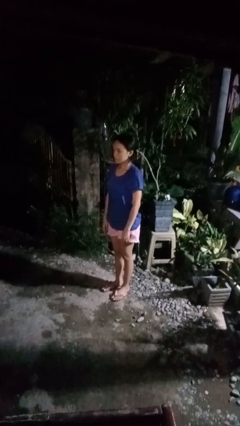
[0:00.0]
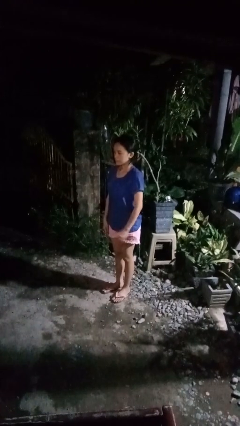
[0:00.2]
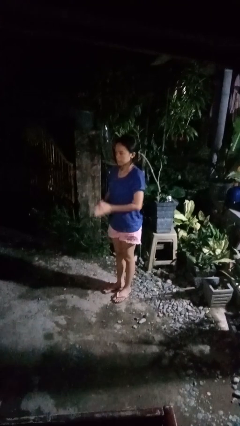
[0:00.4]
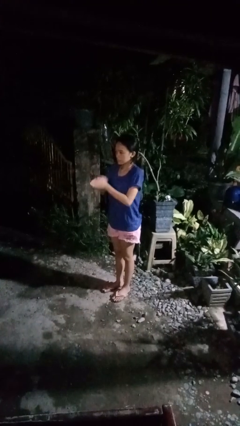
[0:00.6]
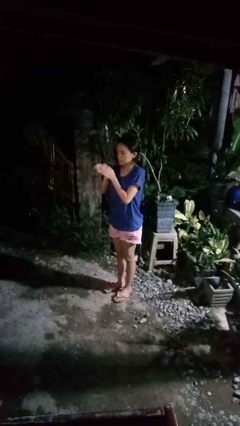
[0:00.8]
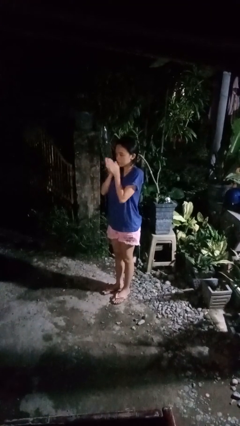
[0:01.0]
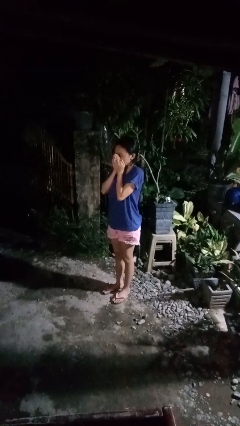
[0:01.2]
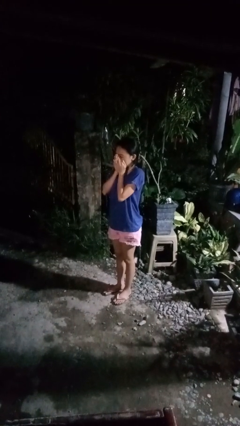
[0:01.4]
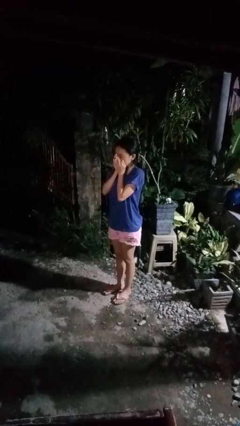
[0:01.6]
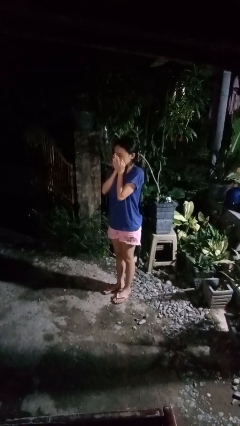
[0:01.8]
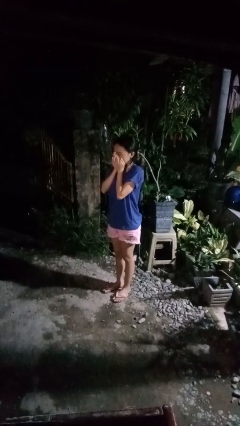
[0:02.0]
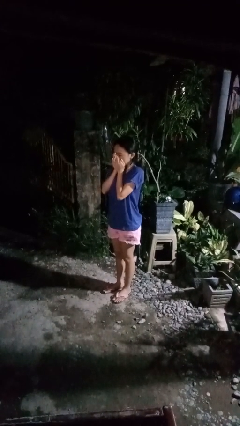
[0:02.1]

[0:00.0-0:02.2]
person blows into hands

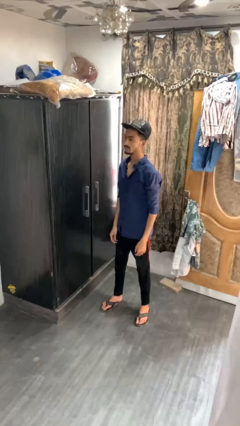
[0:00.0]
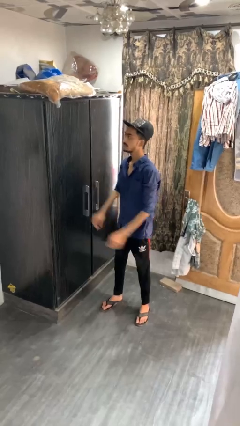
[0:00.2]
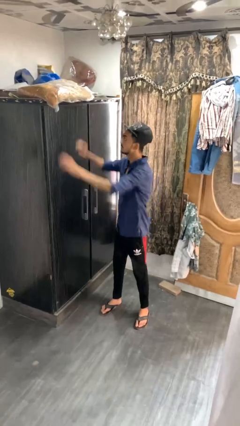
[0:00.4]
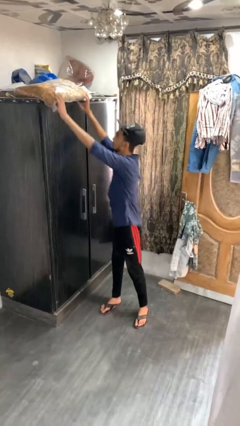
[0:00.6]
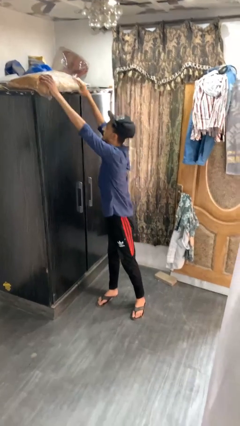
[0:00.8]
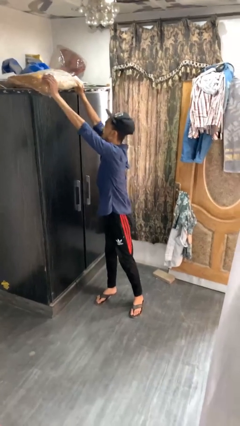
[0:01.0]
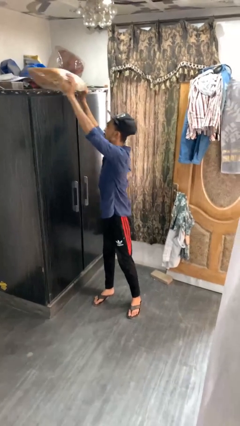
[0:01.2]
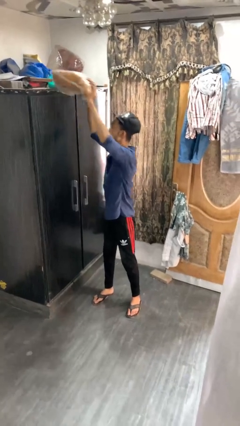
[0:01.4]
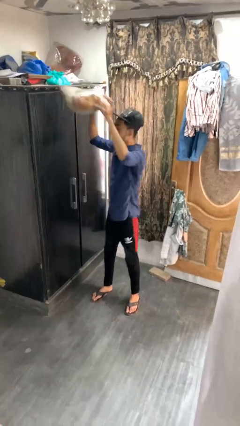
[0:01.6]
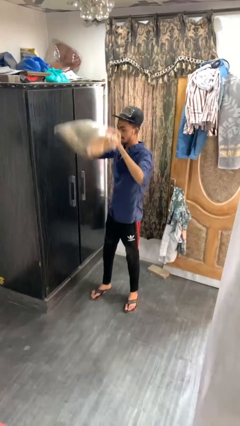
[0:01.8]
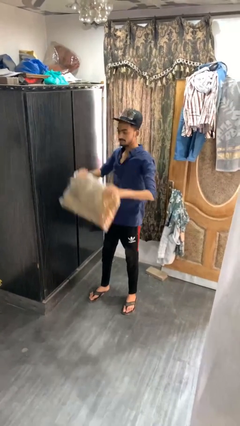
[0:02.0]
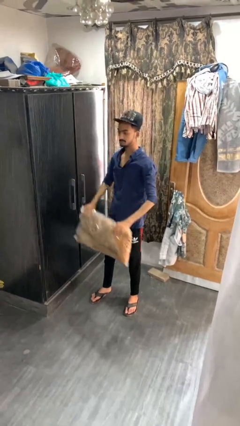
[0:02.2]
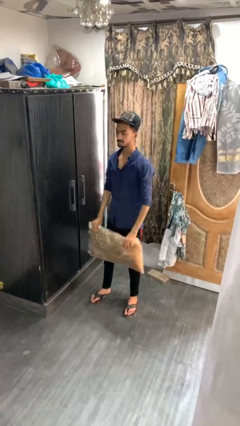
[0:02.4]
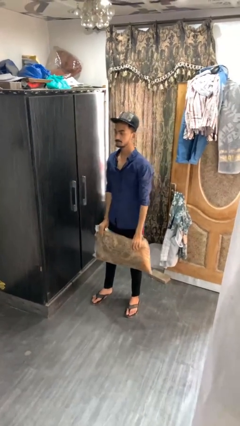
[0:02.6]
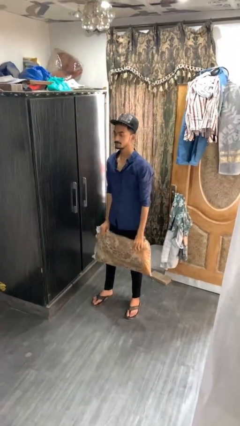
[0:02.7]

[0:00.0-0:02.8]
person picks up object from shelf

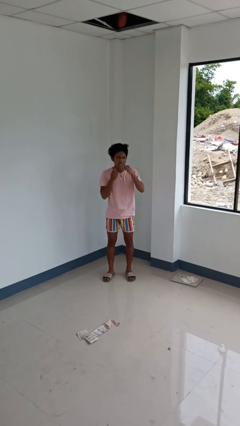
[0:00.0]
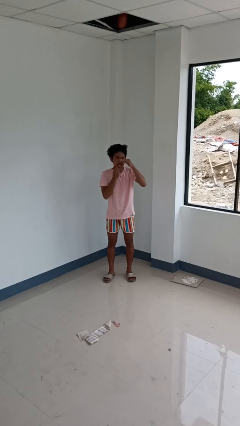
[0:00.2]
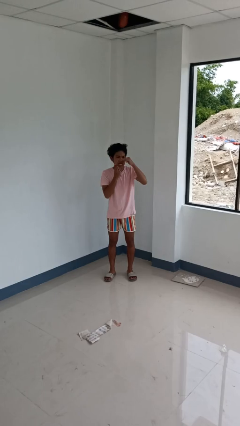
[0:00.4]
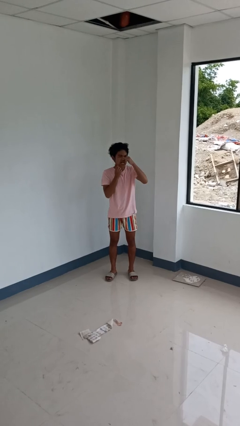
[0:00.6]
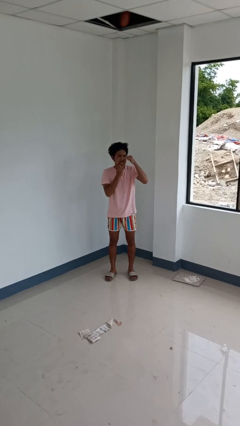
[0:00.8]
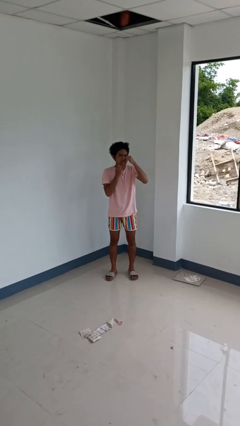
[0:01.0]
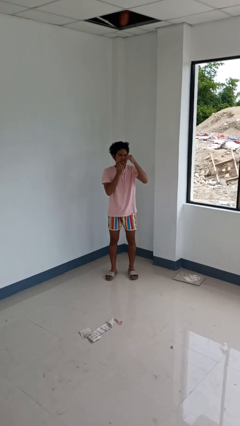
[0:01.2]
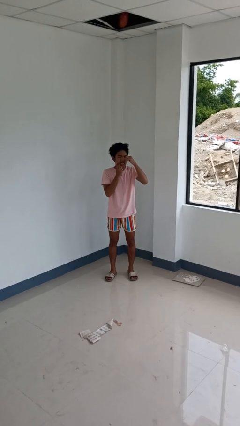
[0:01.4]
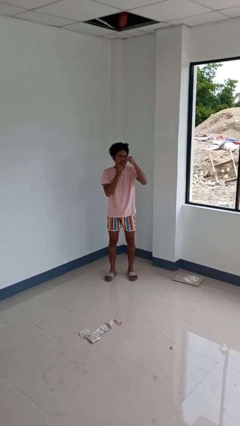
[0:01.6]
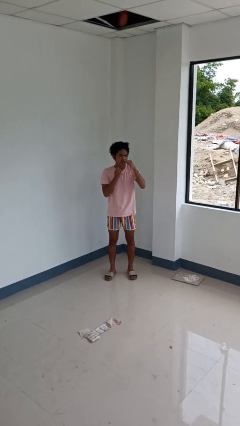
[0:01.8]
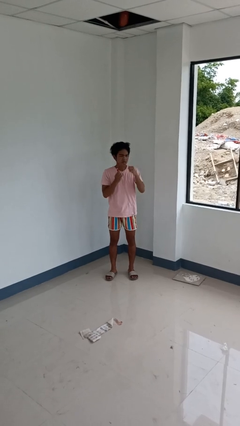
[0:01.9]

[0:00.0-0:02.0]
person flosses

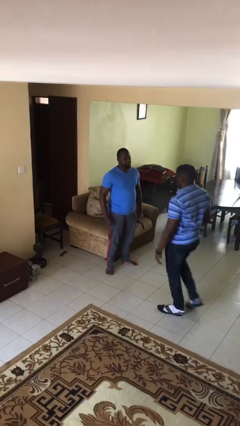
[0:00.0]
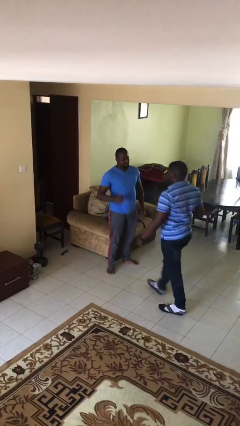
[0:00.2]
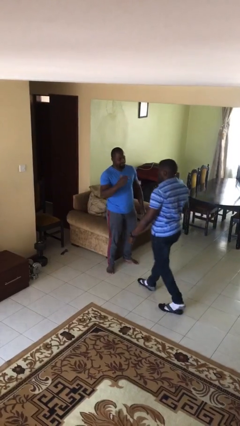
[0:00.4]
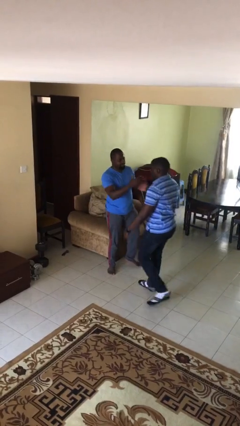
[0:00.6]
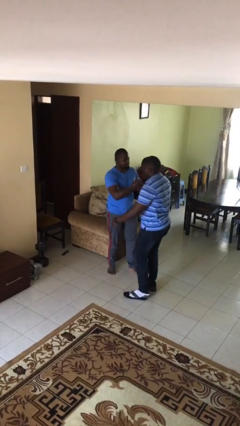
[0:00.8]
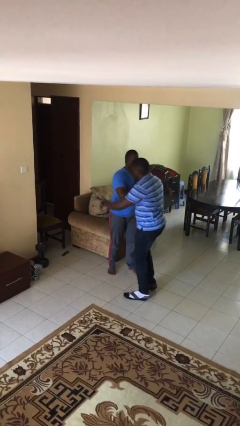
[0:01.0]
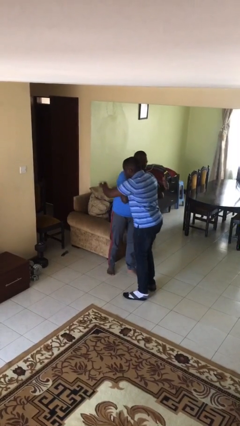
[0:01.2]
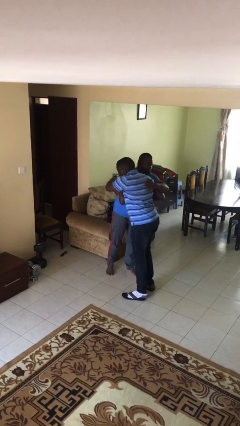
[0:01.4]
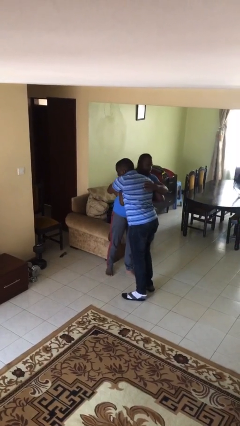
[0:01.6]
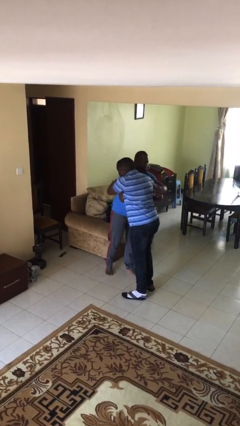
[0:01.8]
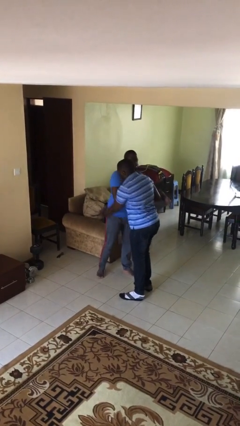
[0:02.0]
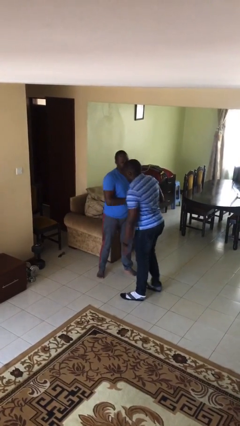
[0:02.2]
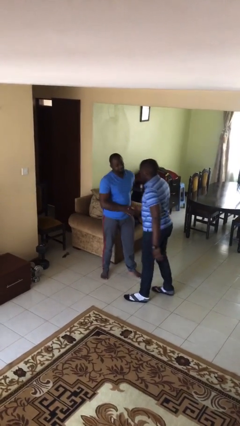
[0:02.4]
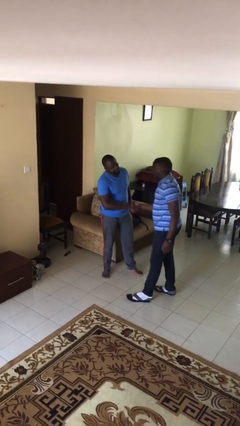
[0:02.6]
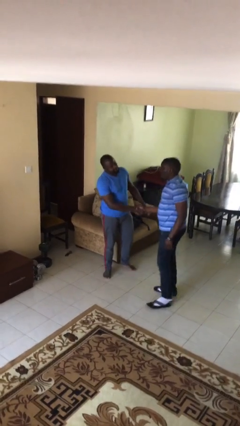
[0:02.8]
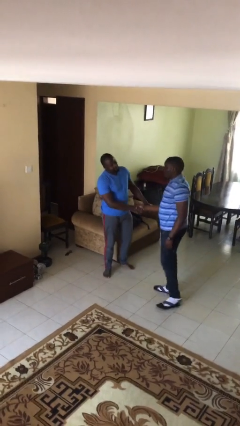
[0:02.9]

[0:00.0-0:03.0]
person embraces person

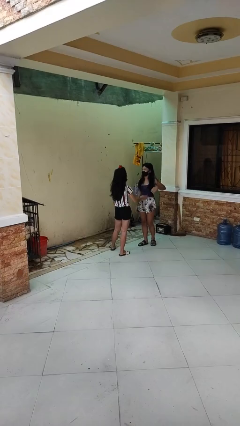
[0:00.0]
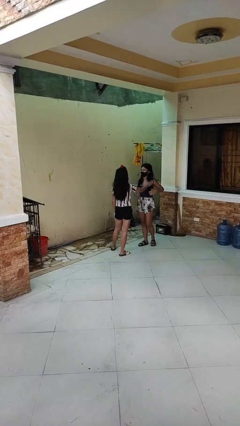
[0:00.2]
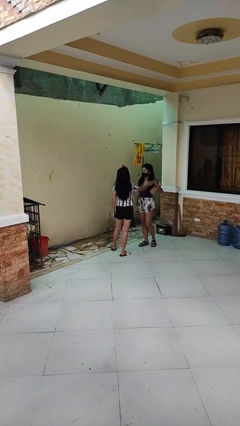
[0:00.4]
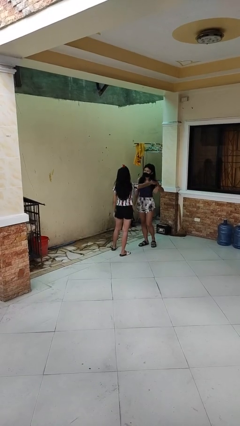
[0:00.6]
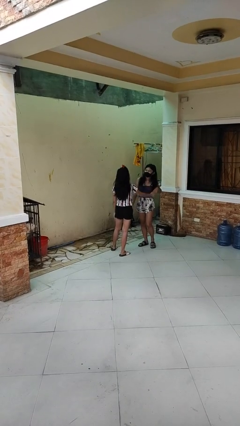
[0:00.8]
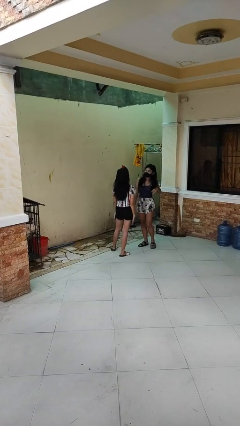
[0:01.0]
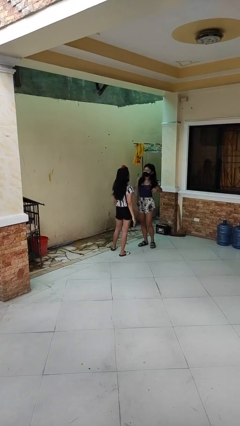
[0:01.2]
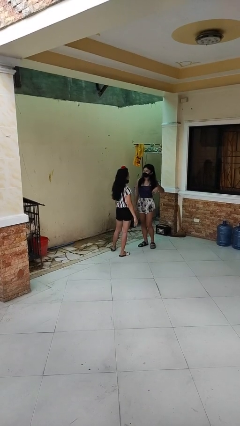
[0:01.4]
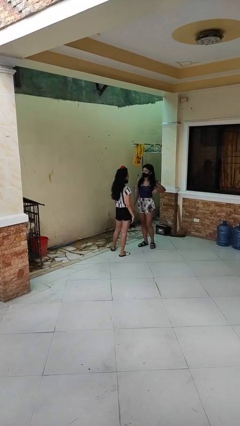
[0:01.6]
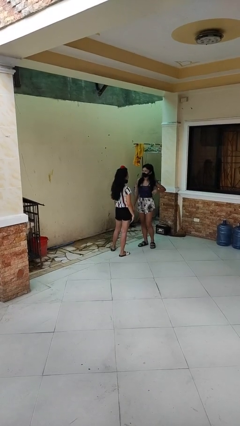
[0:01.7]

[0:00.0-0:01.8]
person shoves person

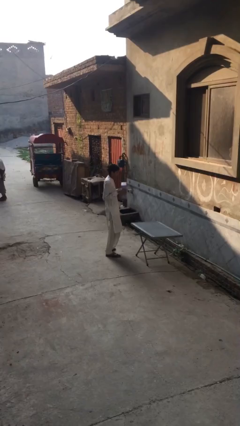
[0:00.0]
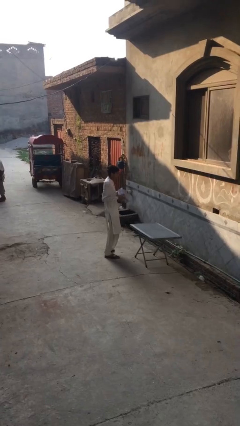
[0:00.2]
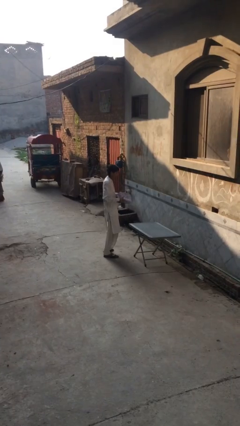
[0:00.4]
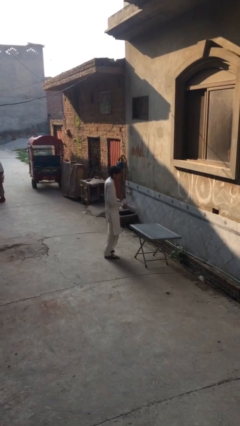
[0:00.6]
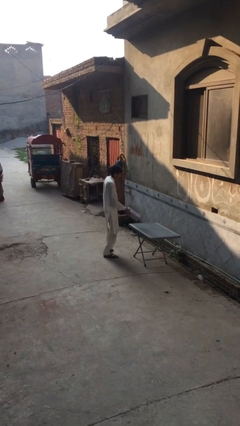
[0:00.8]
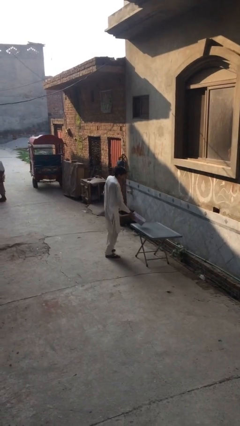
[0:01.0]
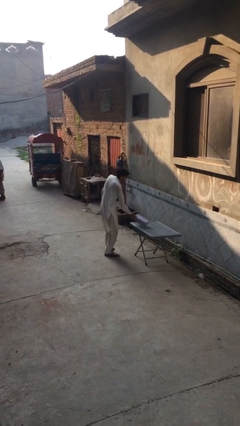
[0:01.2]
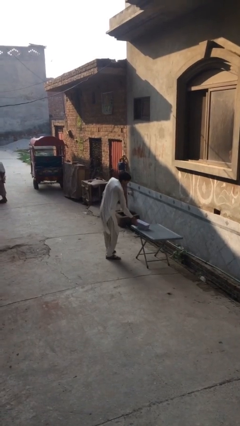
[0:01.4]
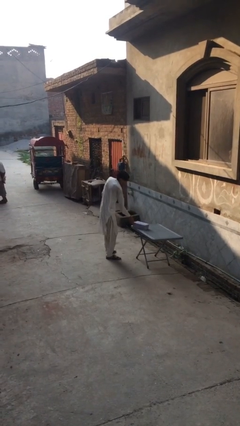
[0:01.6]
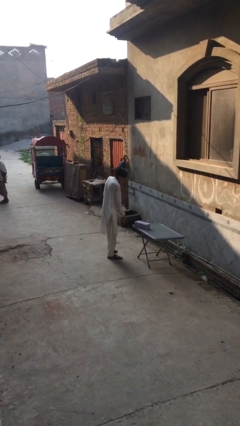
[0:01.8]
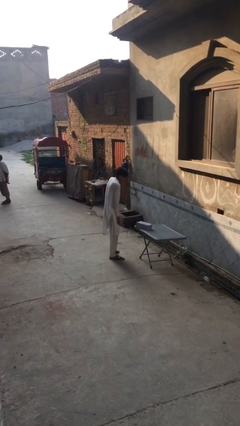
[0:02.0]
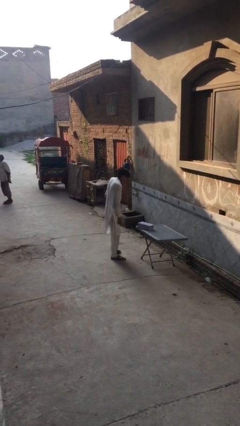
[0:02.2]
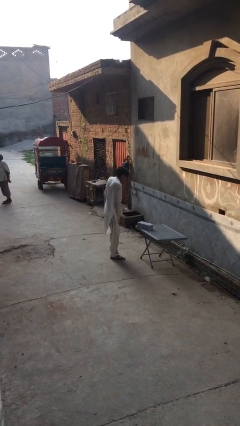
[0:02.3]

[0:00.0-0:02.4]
person puts down object on table

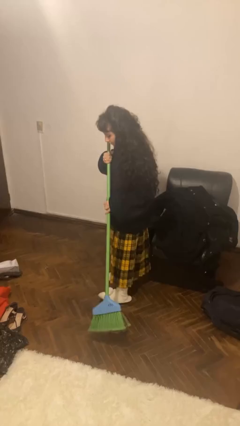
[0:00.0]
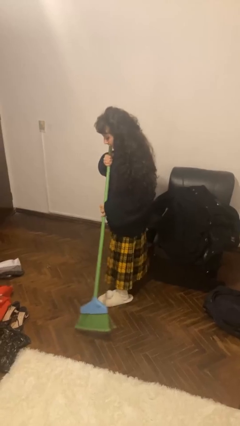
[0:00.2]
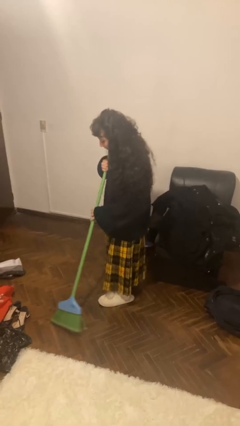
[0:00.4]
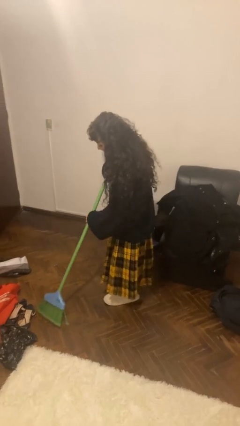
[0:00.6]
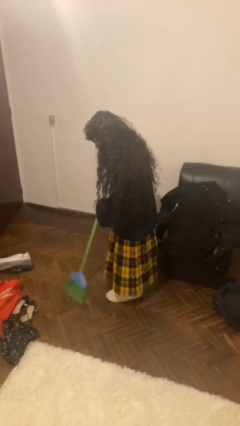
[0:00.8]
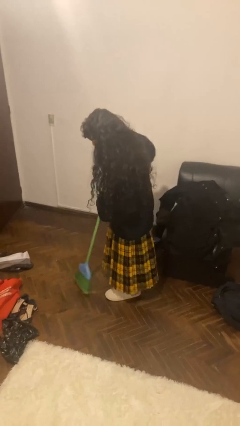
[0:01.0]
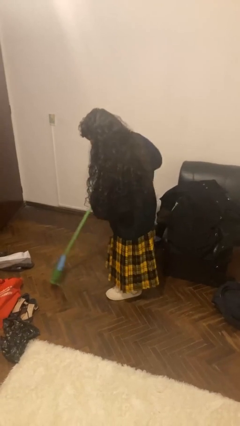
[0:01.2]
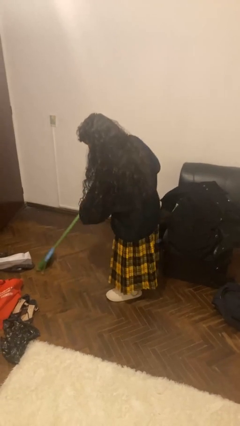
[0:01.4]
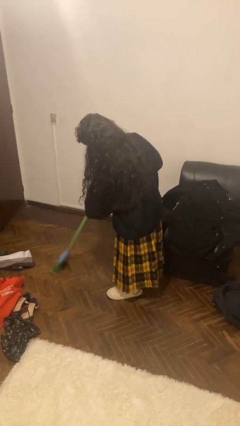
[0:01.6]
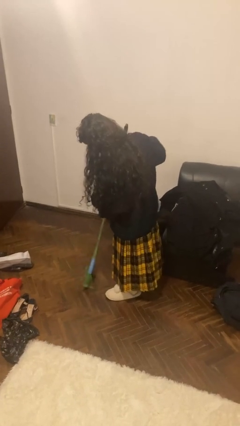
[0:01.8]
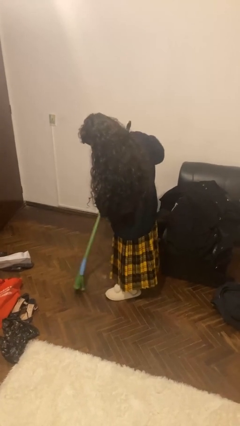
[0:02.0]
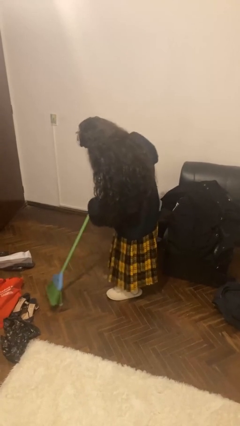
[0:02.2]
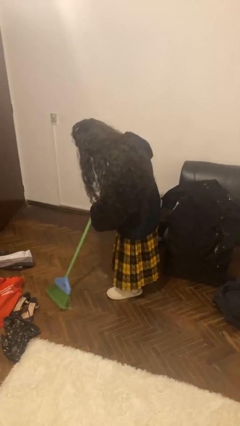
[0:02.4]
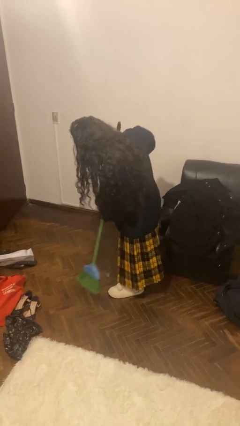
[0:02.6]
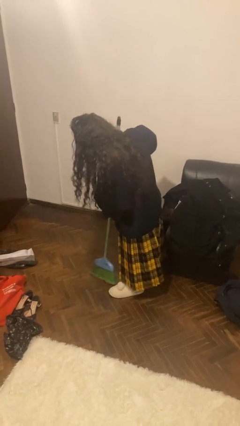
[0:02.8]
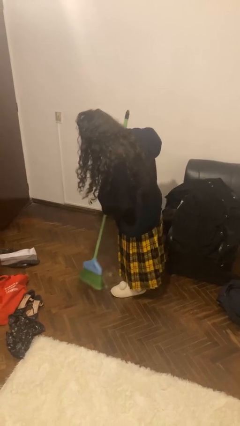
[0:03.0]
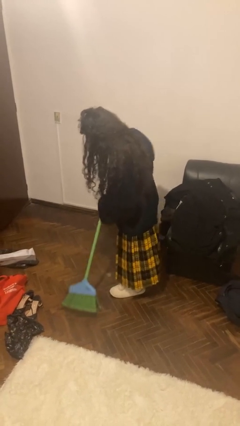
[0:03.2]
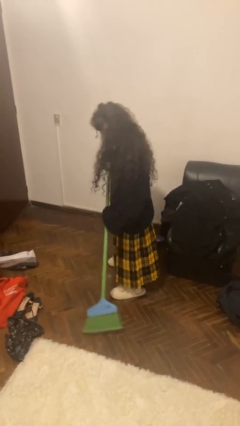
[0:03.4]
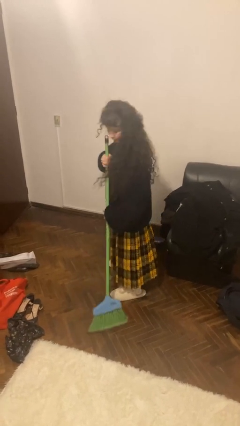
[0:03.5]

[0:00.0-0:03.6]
person sweeps floor
